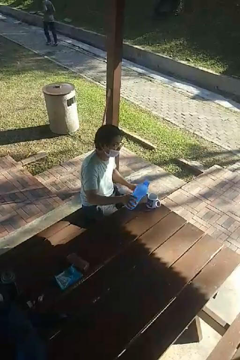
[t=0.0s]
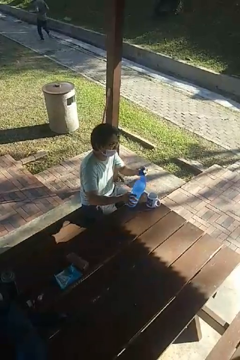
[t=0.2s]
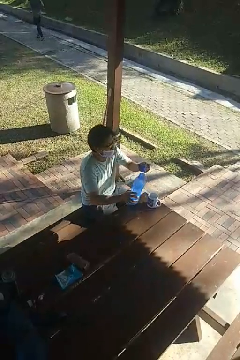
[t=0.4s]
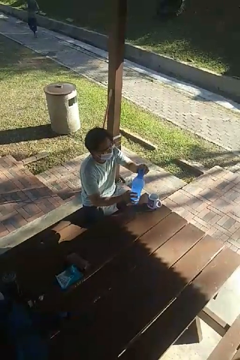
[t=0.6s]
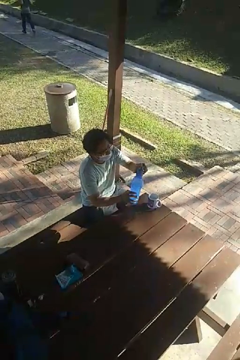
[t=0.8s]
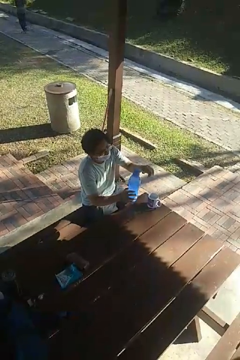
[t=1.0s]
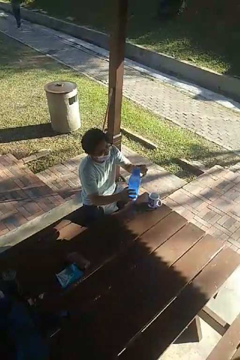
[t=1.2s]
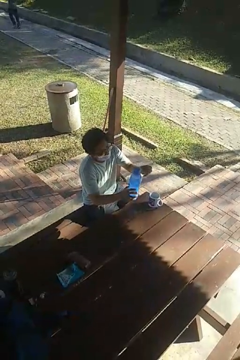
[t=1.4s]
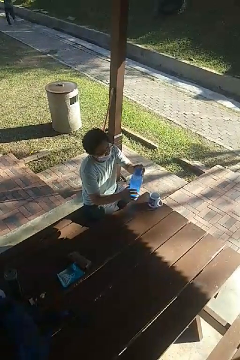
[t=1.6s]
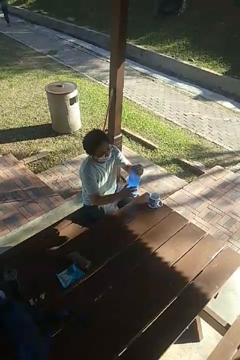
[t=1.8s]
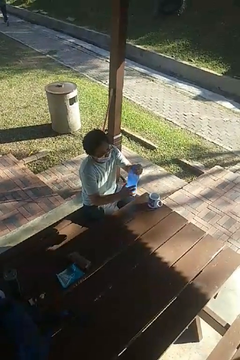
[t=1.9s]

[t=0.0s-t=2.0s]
person screws lid to bottle

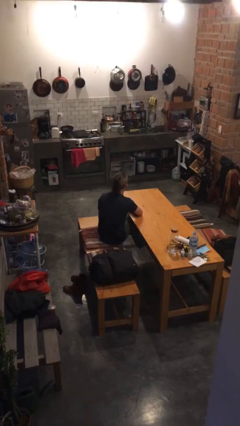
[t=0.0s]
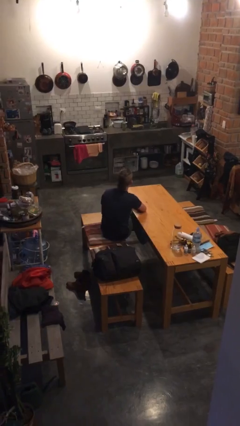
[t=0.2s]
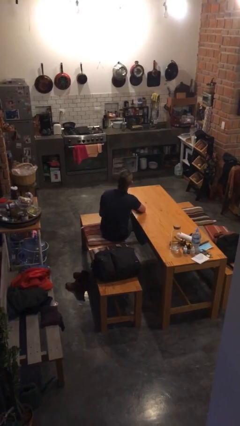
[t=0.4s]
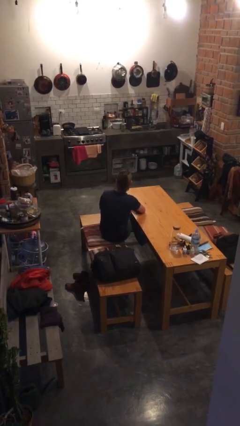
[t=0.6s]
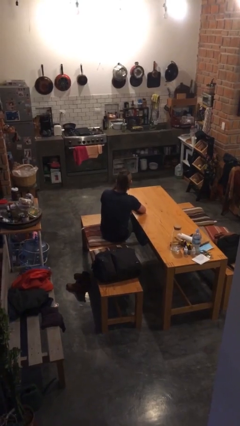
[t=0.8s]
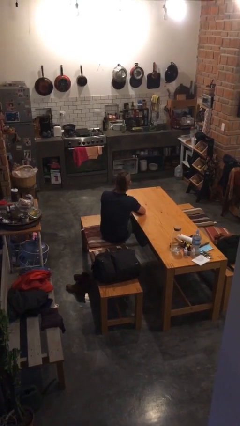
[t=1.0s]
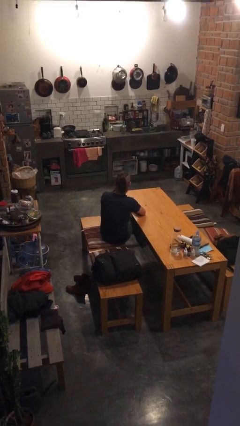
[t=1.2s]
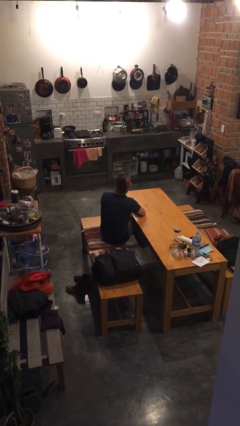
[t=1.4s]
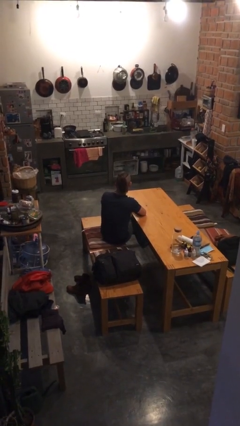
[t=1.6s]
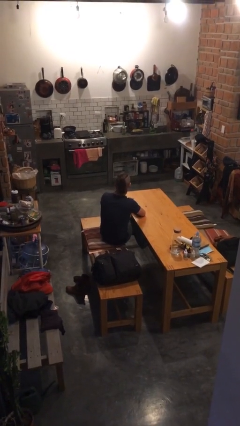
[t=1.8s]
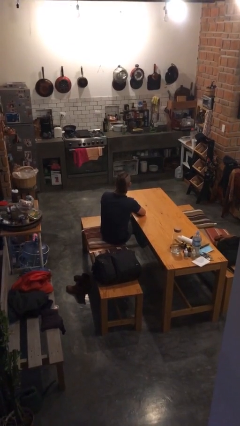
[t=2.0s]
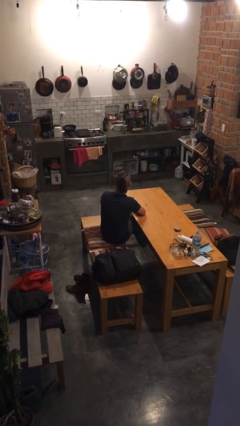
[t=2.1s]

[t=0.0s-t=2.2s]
person licks fingers

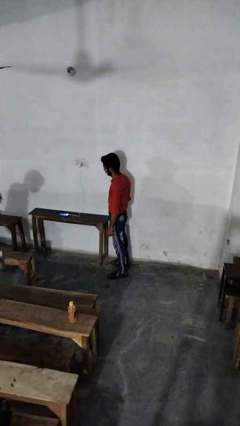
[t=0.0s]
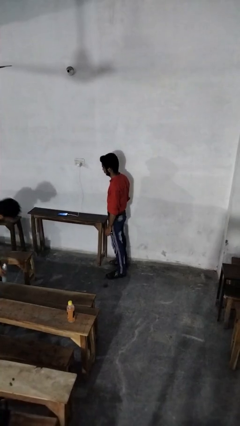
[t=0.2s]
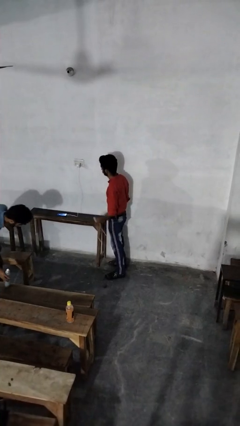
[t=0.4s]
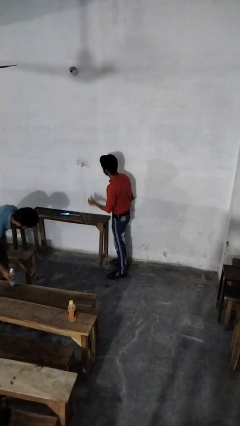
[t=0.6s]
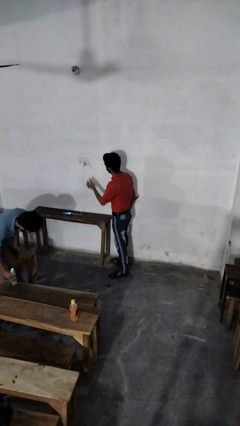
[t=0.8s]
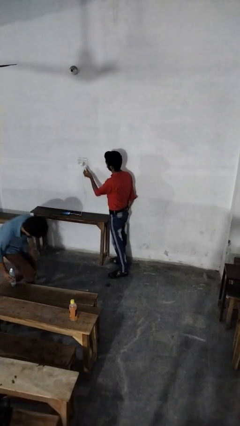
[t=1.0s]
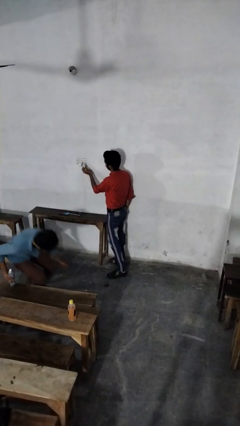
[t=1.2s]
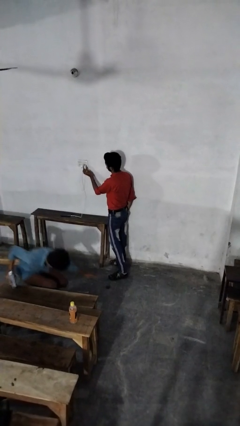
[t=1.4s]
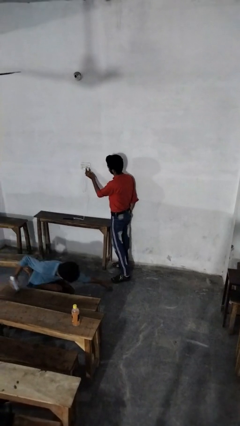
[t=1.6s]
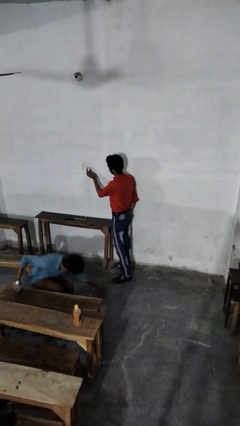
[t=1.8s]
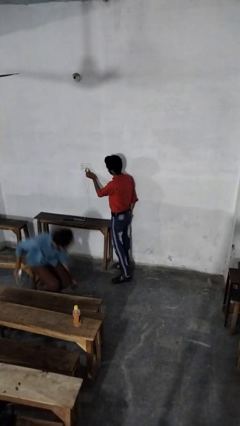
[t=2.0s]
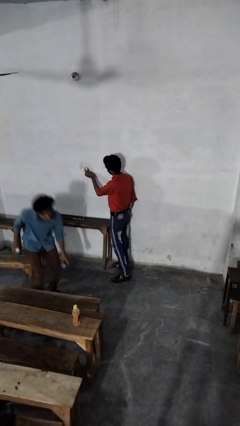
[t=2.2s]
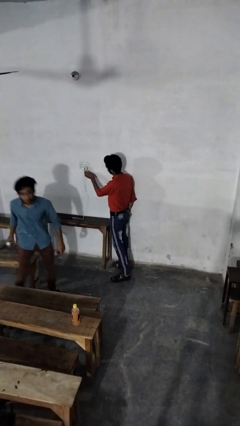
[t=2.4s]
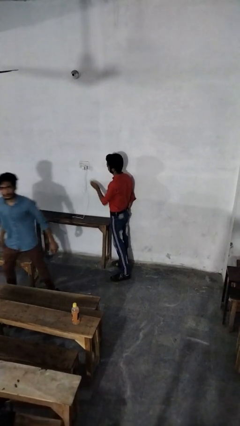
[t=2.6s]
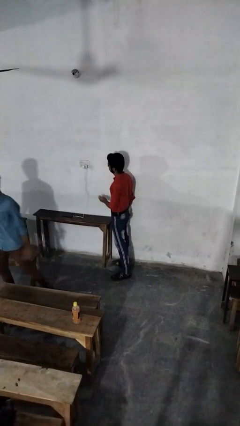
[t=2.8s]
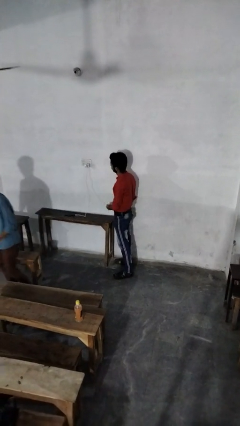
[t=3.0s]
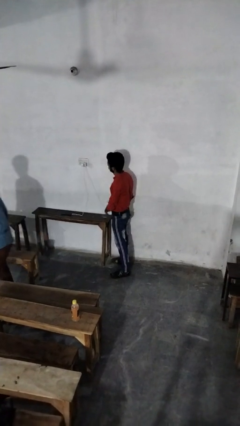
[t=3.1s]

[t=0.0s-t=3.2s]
person plugs into electrical socket

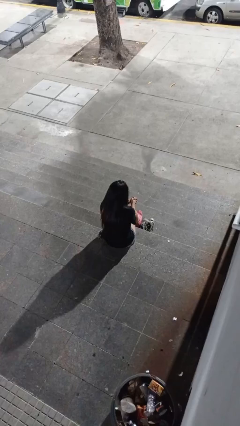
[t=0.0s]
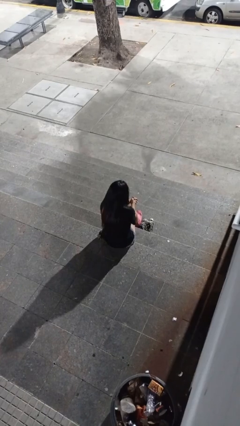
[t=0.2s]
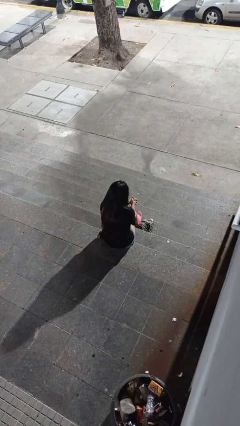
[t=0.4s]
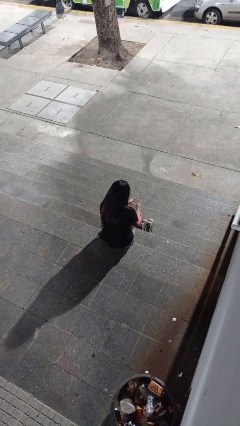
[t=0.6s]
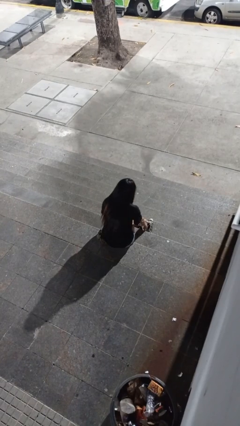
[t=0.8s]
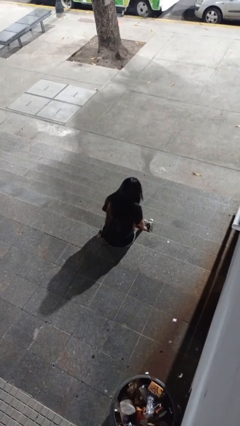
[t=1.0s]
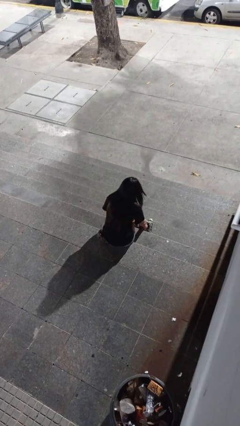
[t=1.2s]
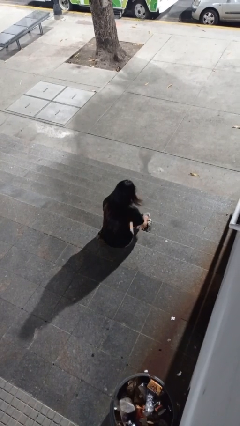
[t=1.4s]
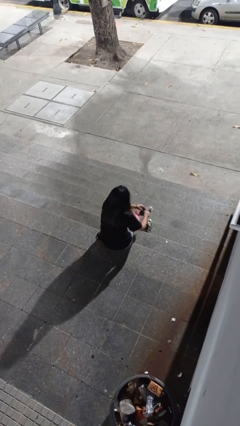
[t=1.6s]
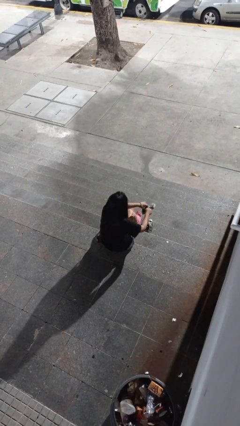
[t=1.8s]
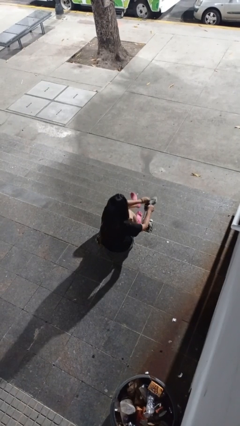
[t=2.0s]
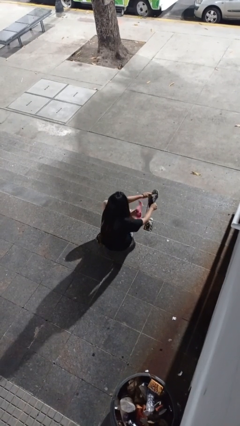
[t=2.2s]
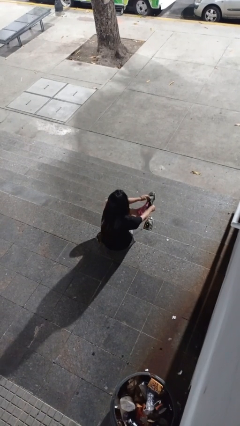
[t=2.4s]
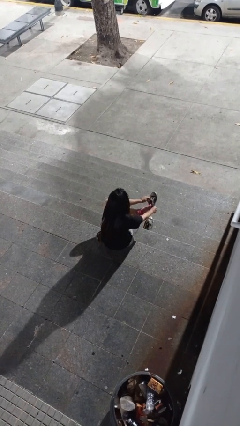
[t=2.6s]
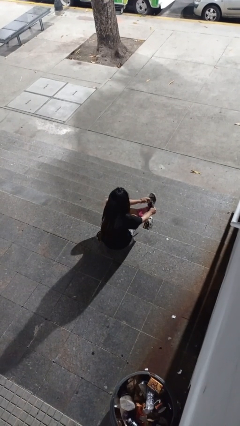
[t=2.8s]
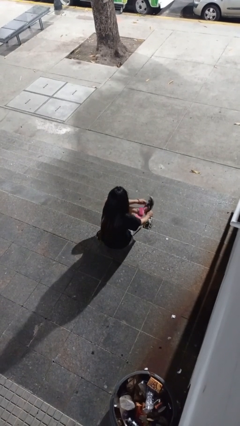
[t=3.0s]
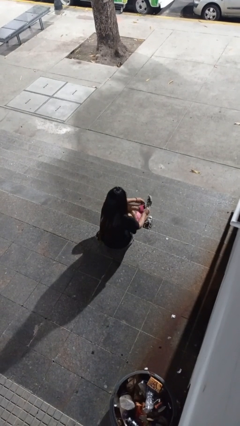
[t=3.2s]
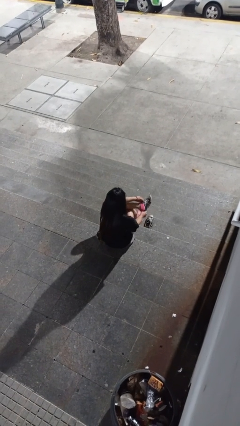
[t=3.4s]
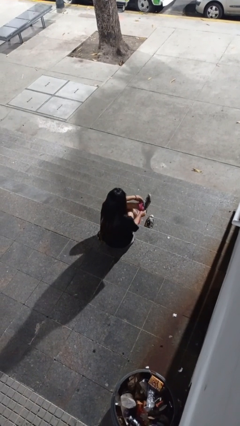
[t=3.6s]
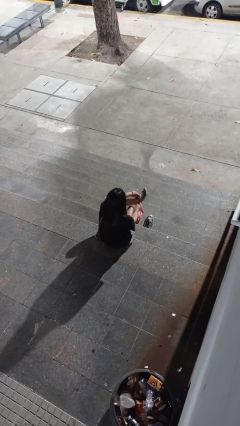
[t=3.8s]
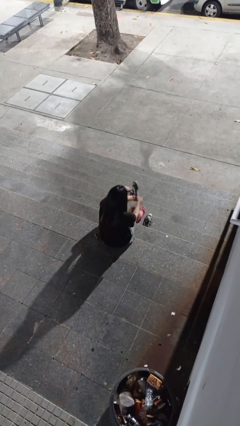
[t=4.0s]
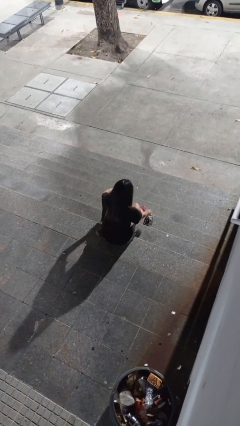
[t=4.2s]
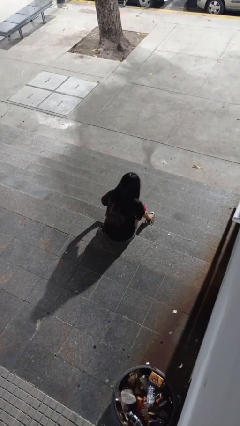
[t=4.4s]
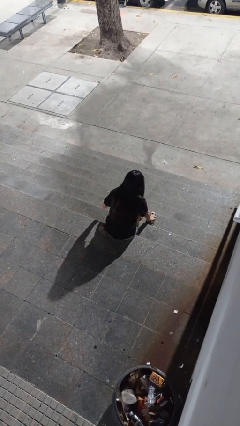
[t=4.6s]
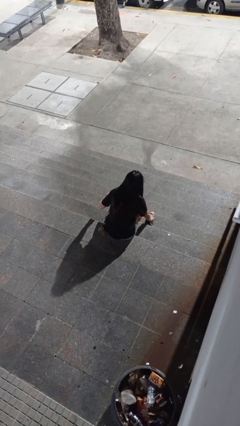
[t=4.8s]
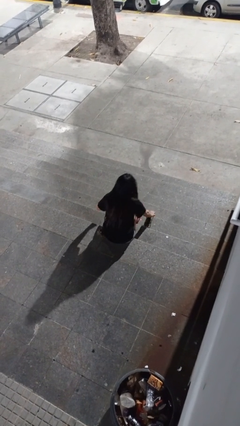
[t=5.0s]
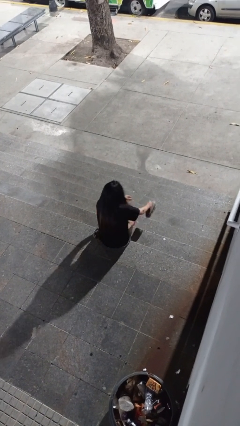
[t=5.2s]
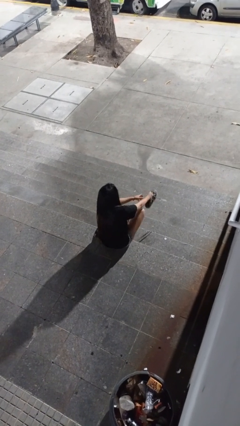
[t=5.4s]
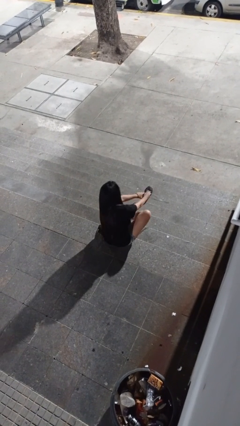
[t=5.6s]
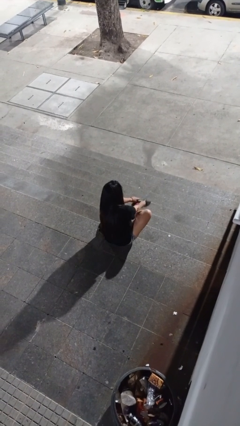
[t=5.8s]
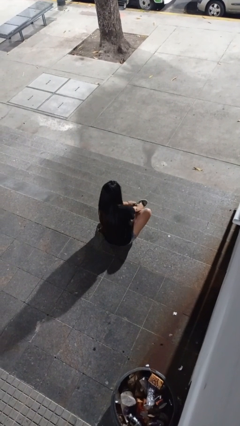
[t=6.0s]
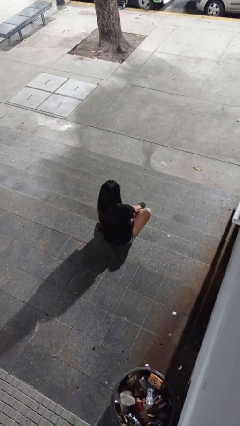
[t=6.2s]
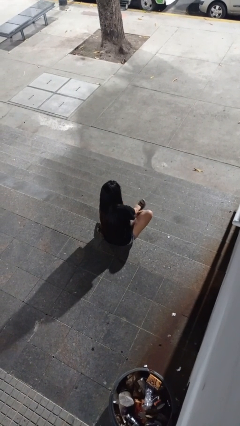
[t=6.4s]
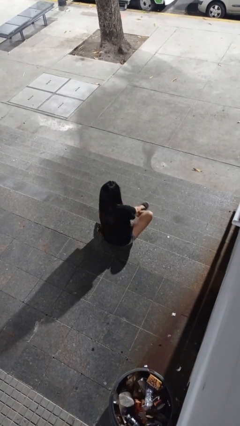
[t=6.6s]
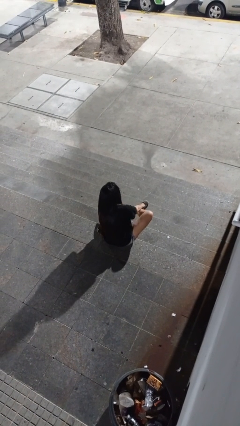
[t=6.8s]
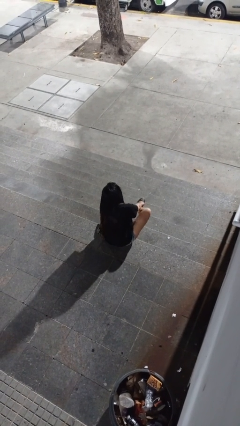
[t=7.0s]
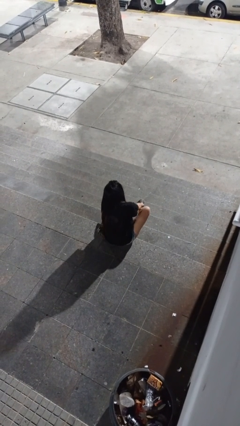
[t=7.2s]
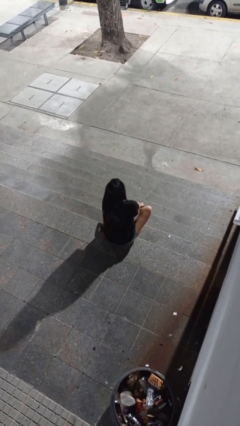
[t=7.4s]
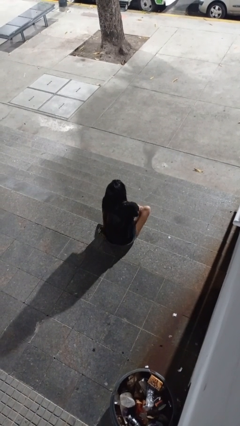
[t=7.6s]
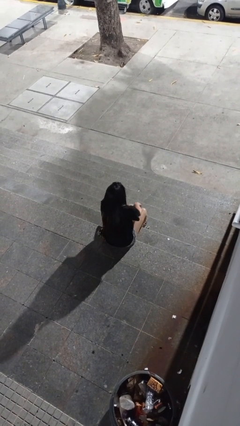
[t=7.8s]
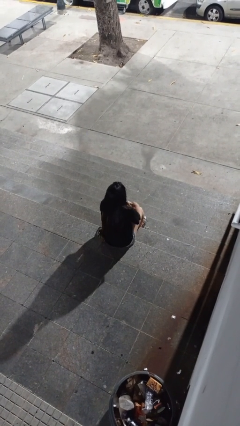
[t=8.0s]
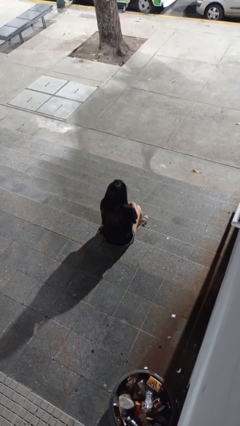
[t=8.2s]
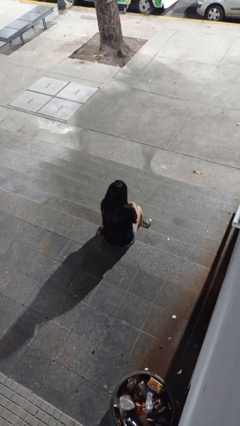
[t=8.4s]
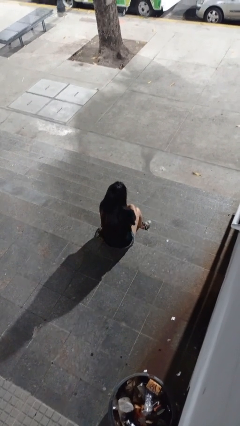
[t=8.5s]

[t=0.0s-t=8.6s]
person puts on shoes

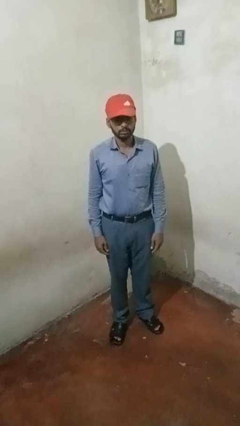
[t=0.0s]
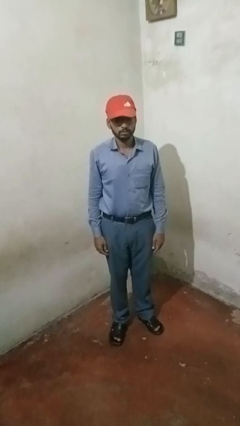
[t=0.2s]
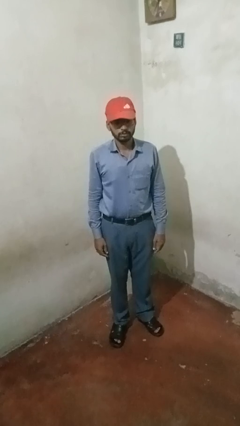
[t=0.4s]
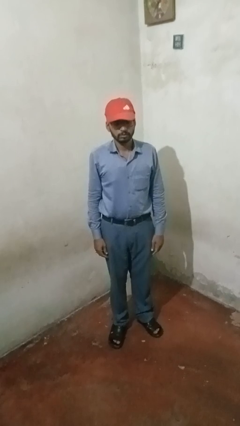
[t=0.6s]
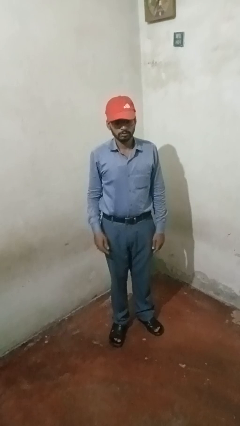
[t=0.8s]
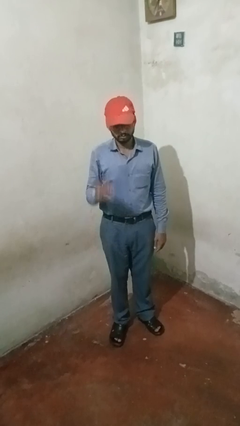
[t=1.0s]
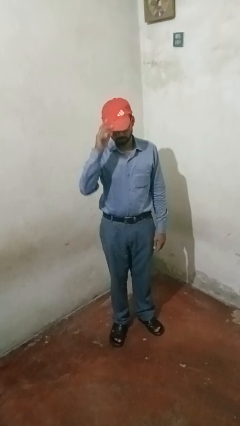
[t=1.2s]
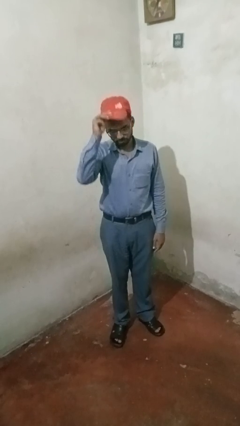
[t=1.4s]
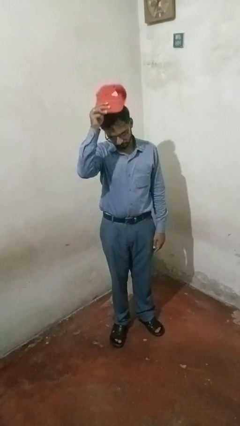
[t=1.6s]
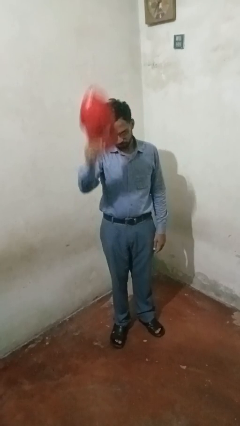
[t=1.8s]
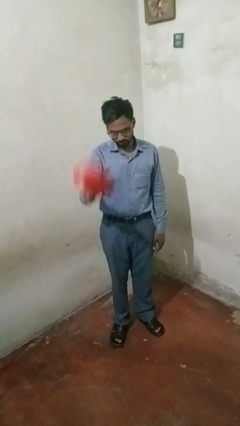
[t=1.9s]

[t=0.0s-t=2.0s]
person takes off hat
